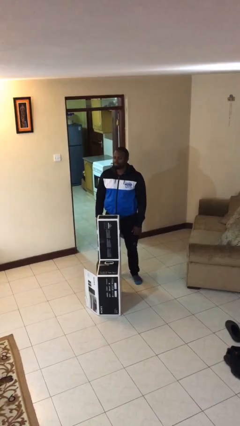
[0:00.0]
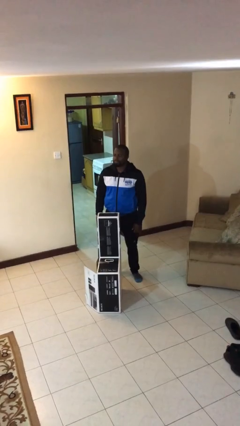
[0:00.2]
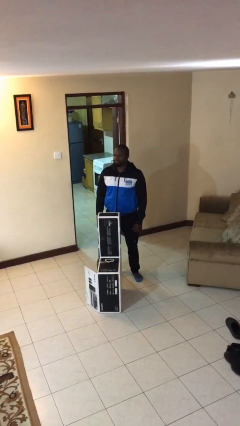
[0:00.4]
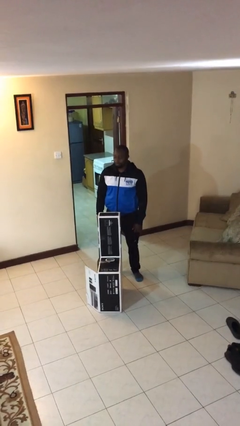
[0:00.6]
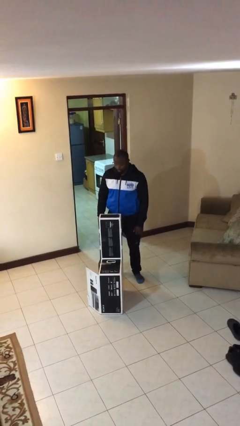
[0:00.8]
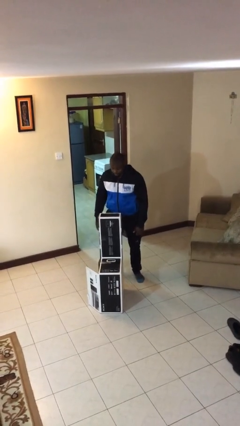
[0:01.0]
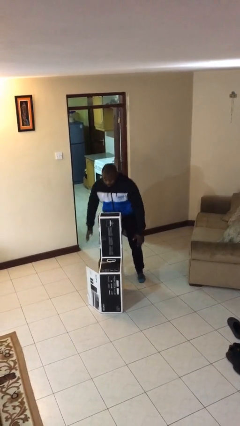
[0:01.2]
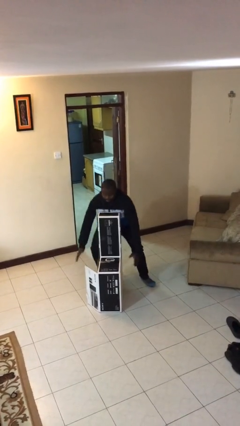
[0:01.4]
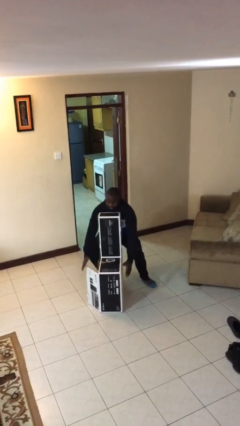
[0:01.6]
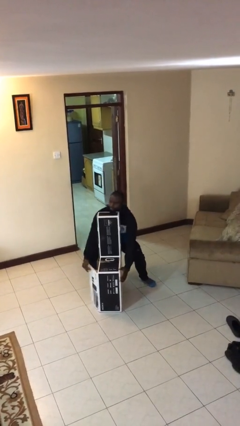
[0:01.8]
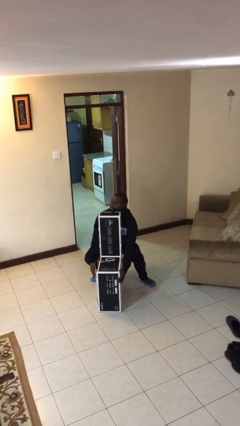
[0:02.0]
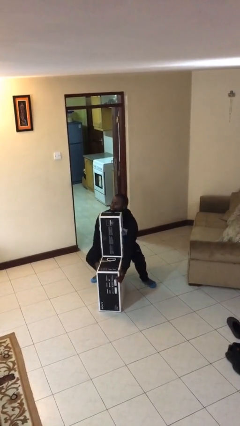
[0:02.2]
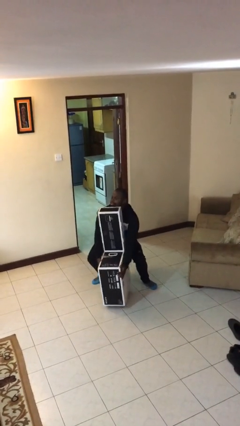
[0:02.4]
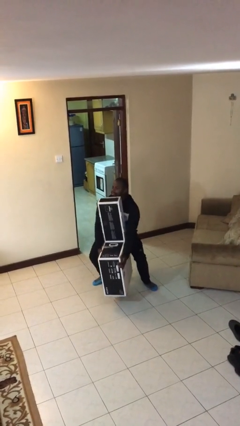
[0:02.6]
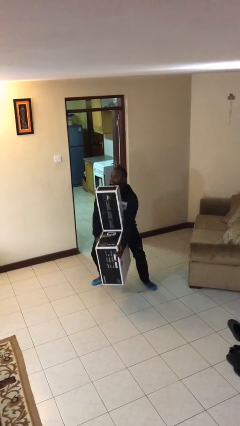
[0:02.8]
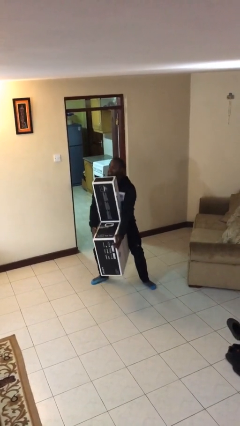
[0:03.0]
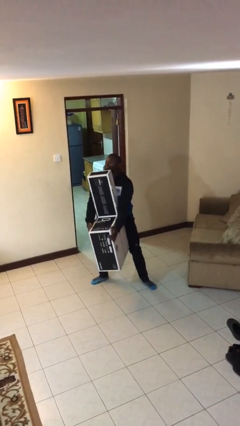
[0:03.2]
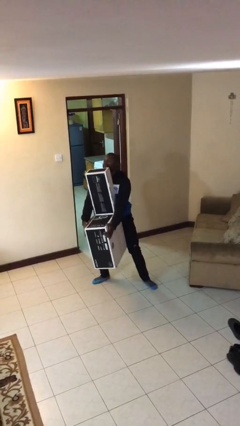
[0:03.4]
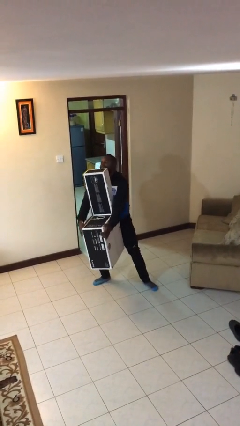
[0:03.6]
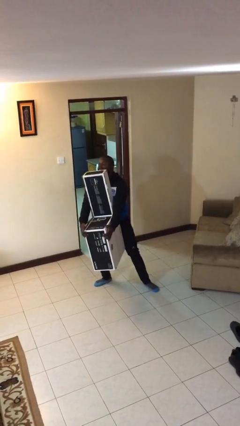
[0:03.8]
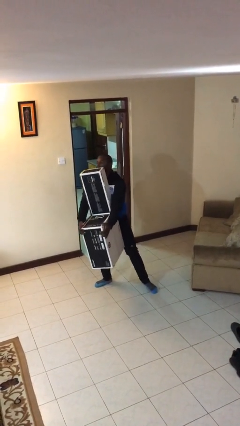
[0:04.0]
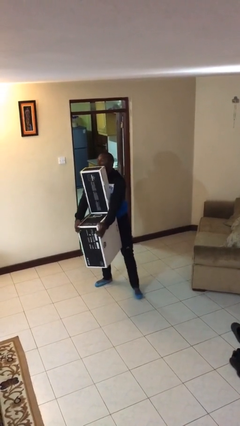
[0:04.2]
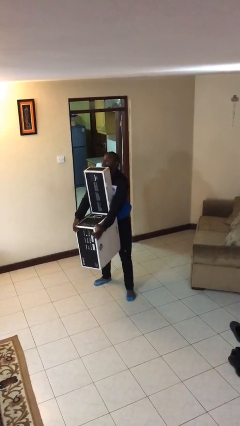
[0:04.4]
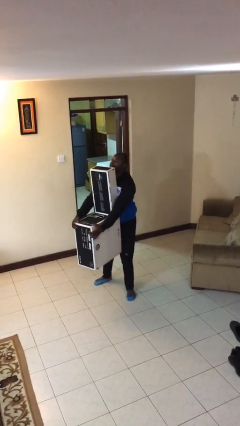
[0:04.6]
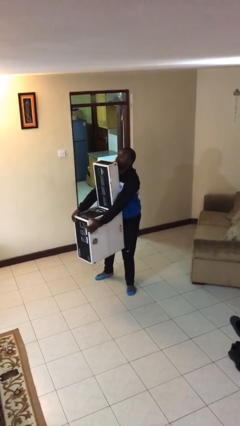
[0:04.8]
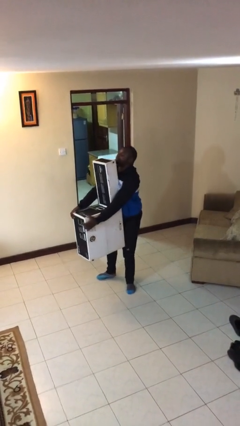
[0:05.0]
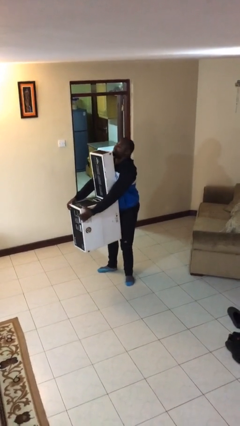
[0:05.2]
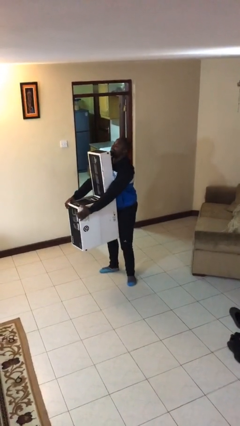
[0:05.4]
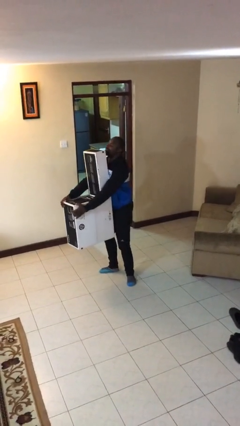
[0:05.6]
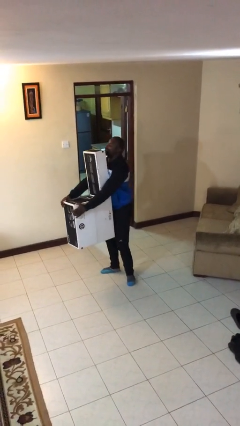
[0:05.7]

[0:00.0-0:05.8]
person picks up object from floor

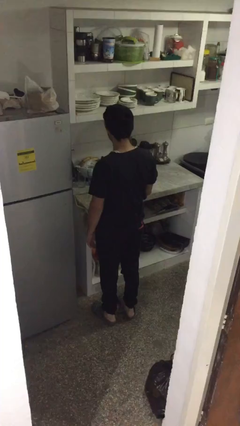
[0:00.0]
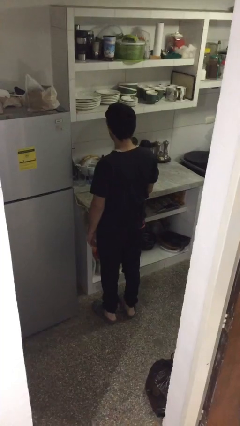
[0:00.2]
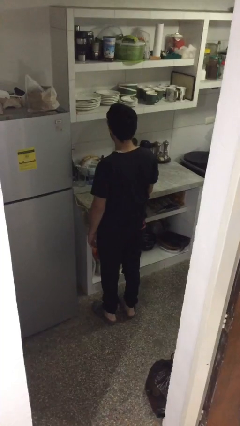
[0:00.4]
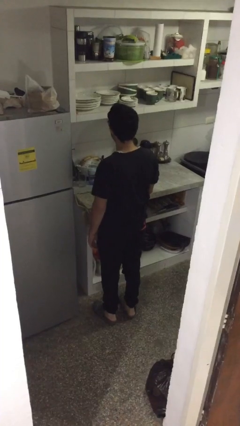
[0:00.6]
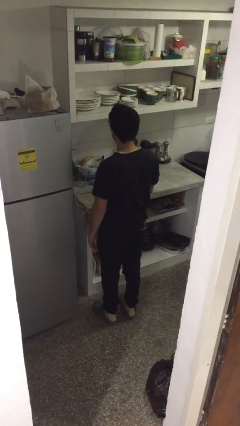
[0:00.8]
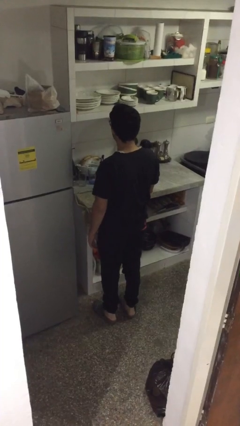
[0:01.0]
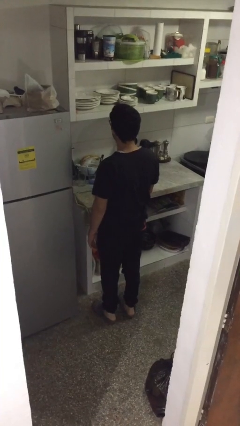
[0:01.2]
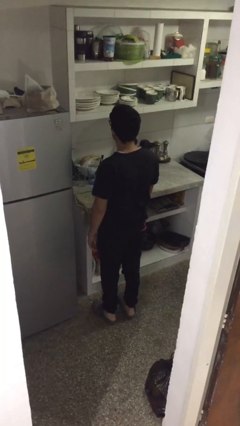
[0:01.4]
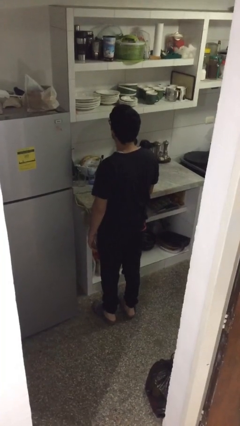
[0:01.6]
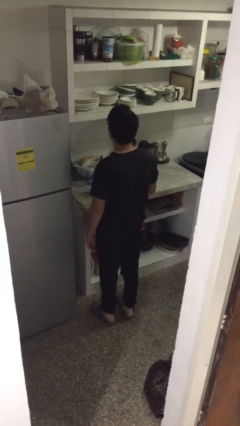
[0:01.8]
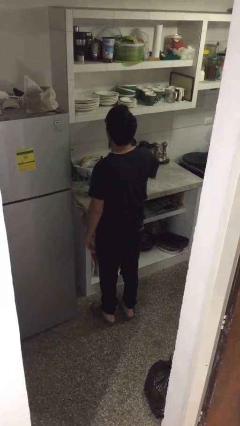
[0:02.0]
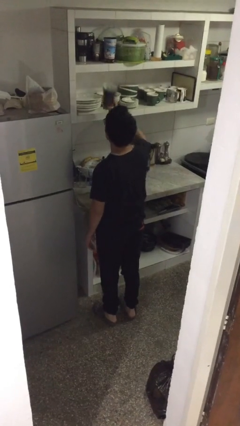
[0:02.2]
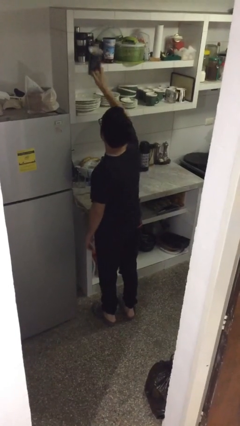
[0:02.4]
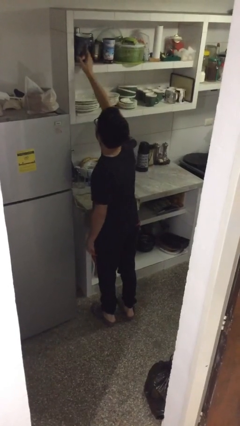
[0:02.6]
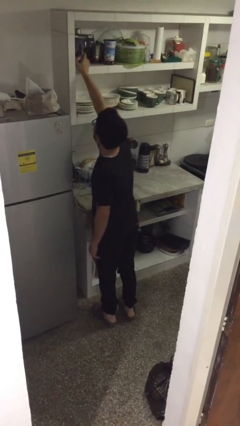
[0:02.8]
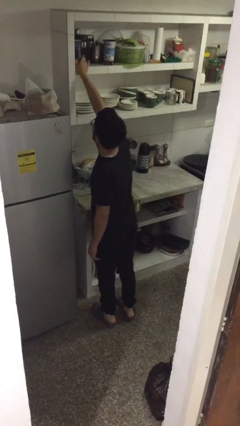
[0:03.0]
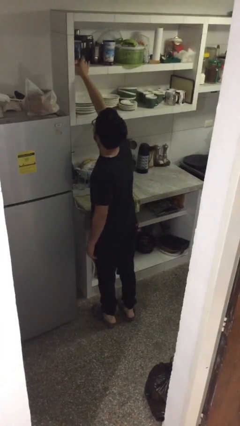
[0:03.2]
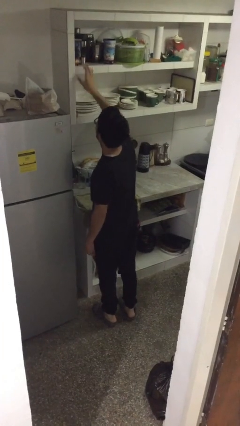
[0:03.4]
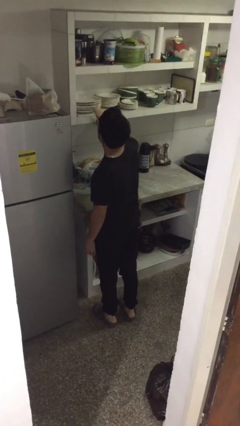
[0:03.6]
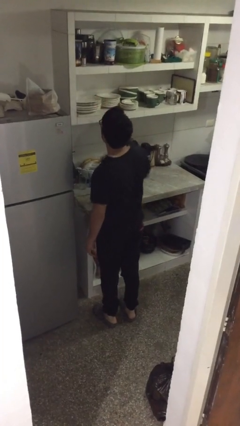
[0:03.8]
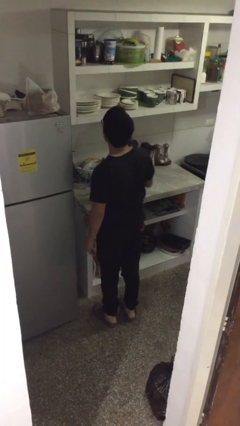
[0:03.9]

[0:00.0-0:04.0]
person puts down object on shelf

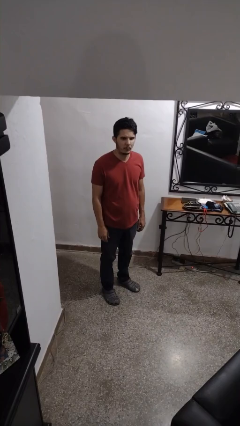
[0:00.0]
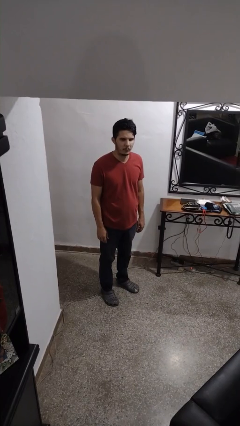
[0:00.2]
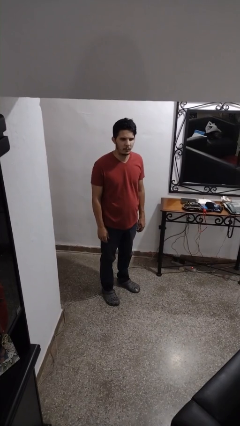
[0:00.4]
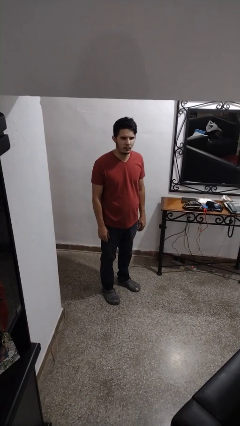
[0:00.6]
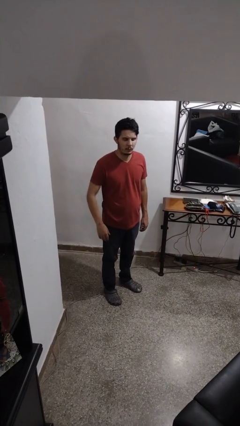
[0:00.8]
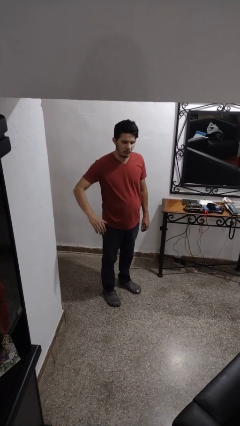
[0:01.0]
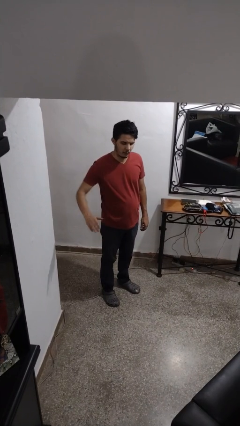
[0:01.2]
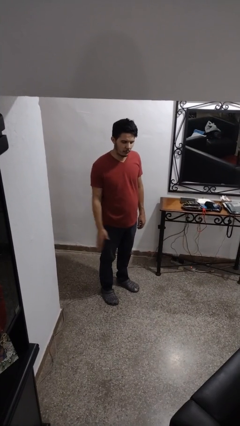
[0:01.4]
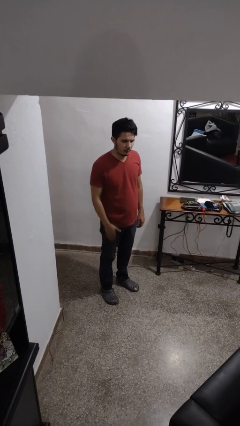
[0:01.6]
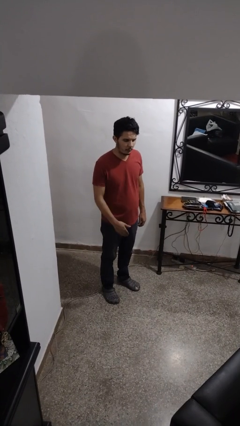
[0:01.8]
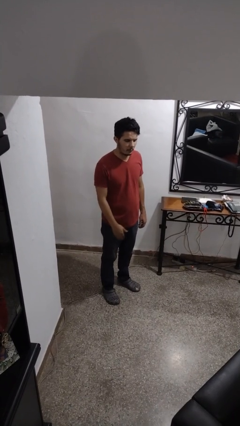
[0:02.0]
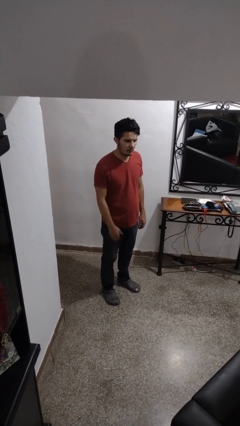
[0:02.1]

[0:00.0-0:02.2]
person slaps hands on thighs

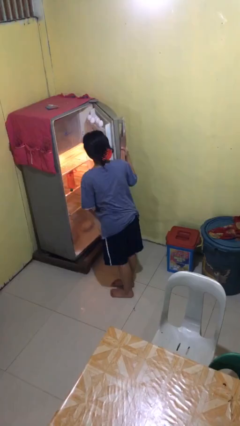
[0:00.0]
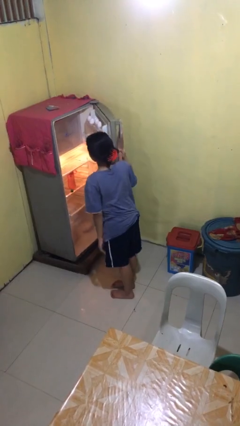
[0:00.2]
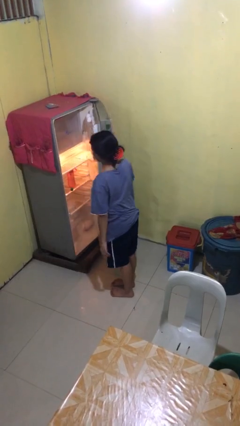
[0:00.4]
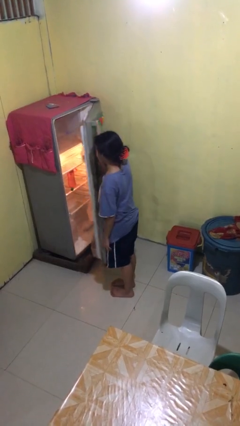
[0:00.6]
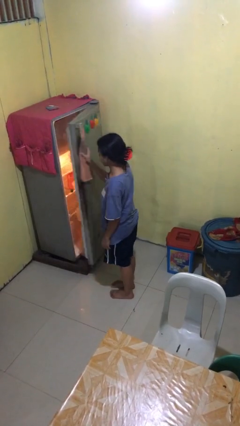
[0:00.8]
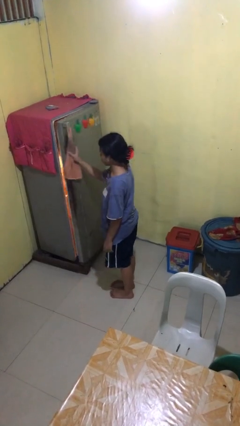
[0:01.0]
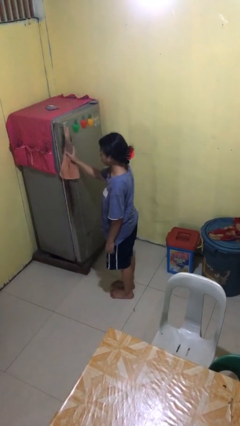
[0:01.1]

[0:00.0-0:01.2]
person closes refrigerator

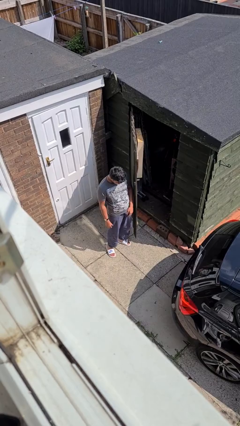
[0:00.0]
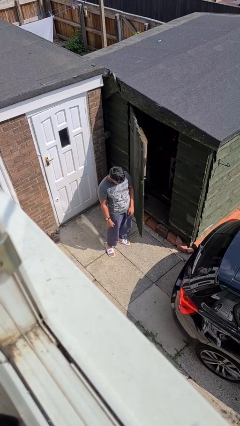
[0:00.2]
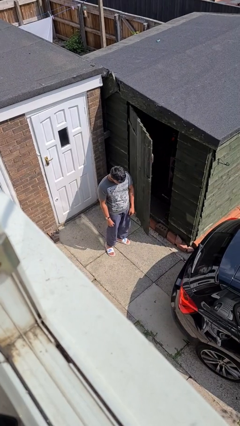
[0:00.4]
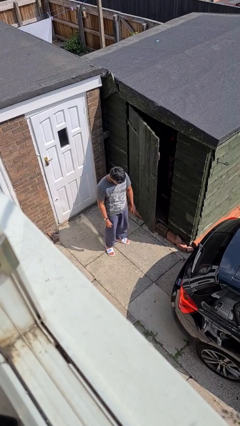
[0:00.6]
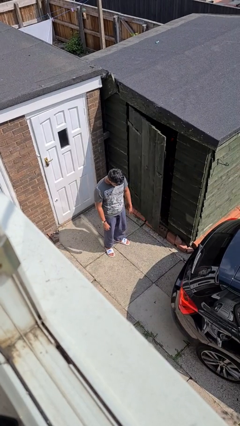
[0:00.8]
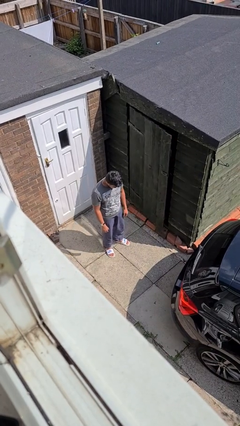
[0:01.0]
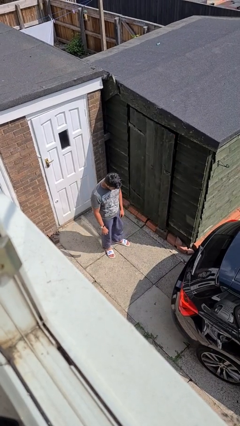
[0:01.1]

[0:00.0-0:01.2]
person closes door with hip

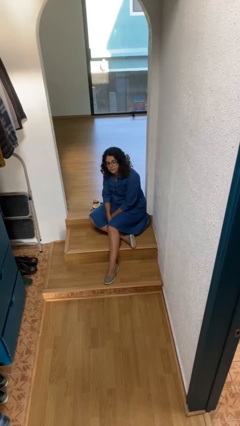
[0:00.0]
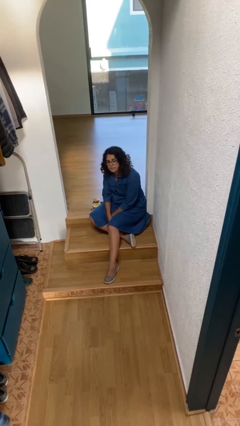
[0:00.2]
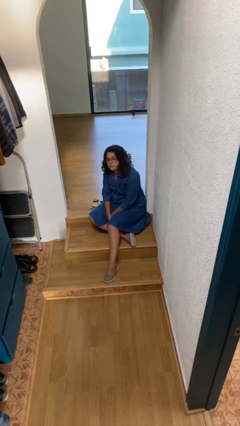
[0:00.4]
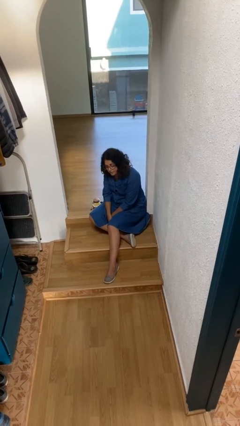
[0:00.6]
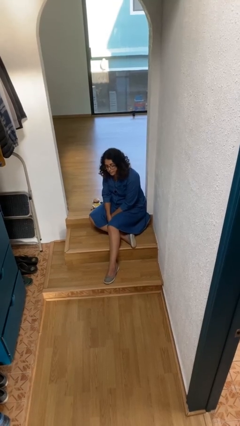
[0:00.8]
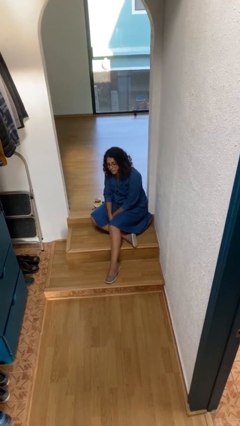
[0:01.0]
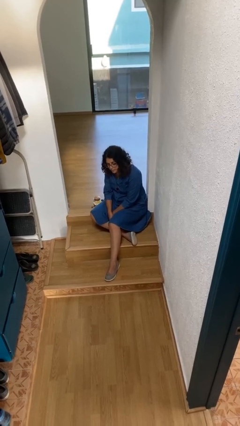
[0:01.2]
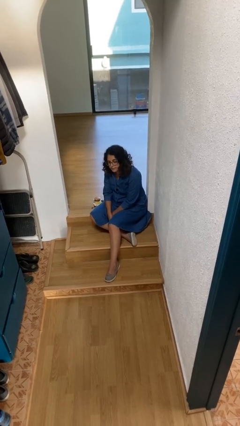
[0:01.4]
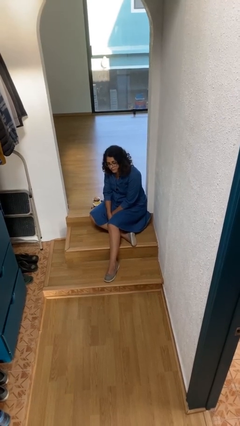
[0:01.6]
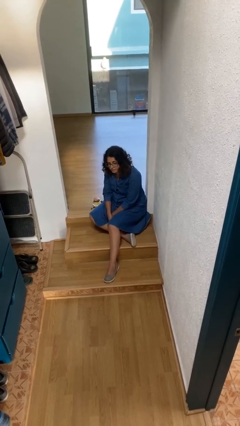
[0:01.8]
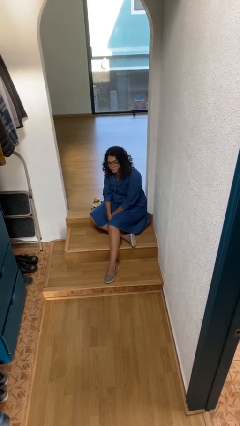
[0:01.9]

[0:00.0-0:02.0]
person nods head

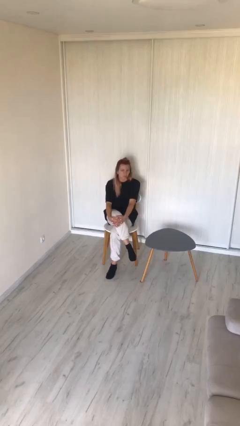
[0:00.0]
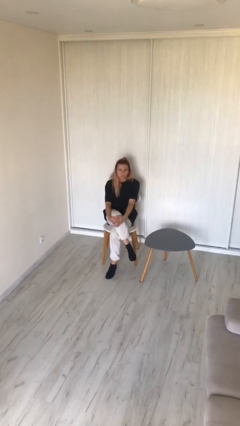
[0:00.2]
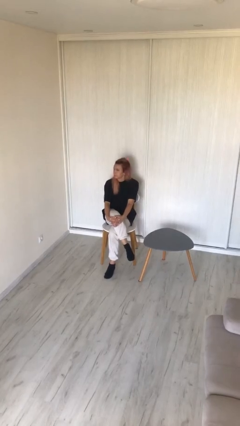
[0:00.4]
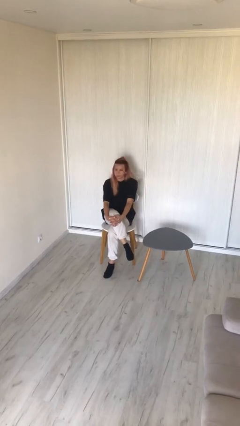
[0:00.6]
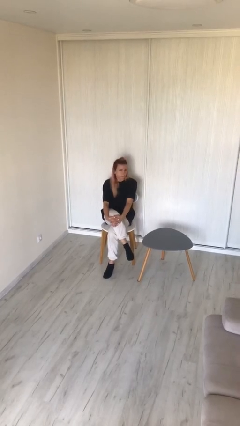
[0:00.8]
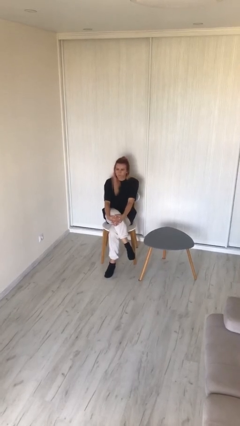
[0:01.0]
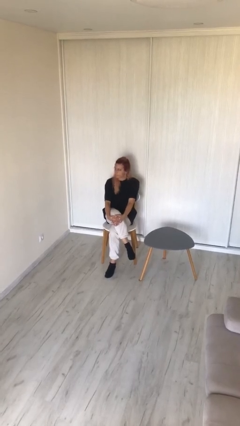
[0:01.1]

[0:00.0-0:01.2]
person shakes head
